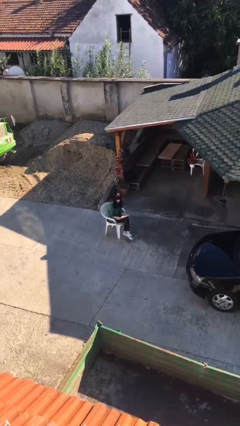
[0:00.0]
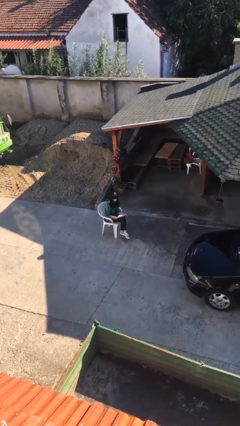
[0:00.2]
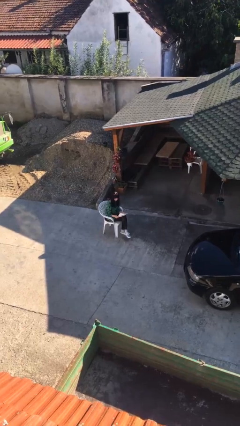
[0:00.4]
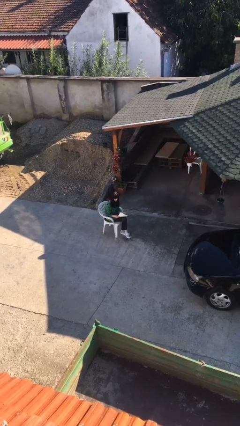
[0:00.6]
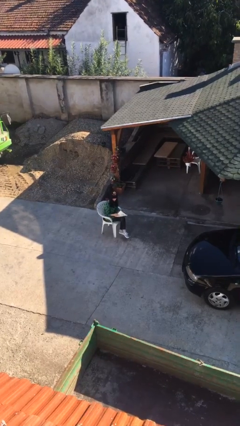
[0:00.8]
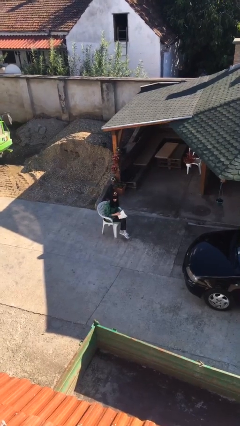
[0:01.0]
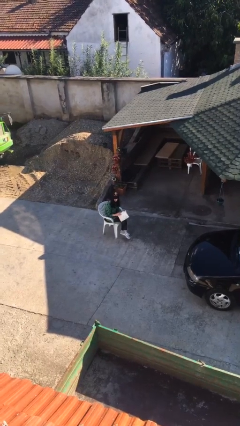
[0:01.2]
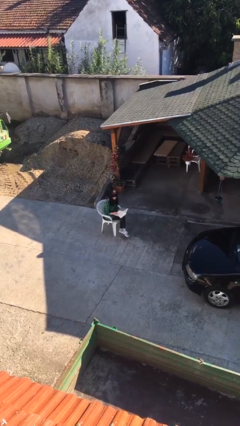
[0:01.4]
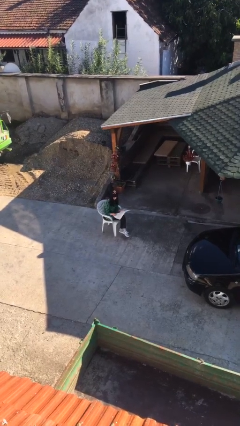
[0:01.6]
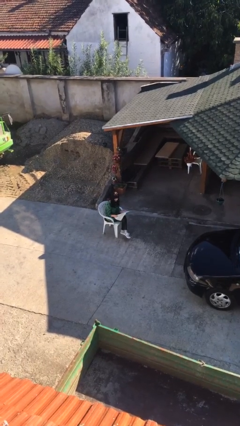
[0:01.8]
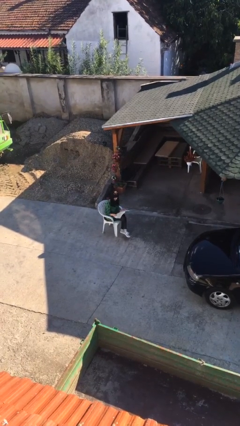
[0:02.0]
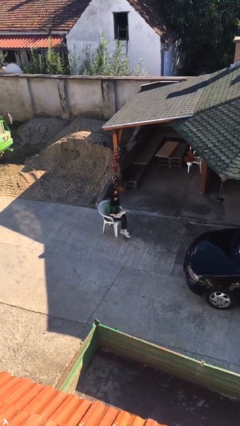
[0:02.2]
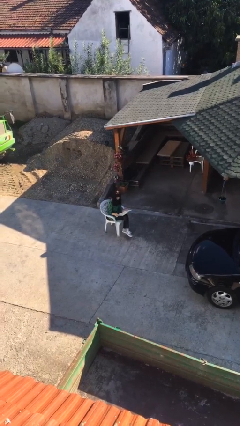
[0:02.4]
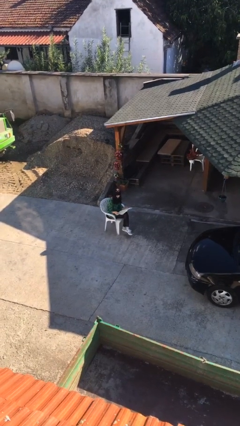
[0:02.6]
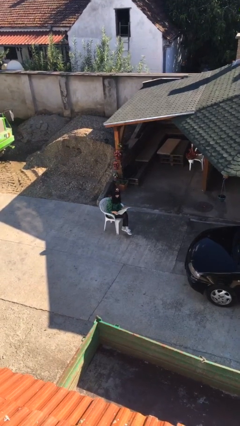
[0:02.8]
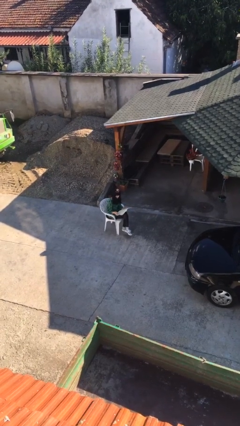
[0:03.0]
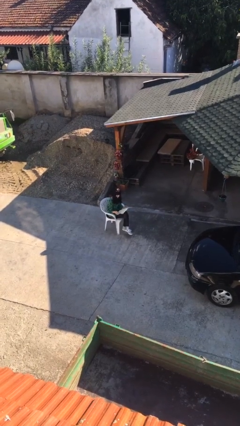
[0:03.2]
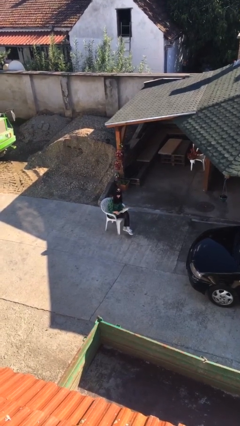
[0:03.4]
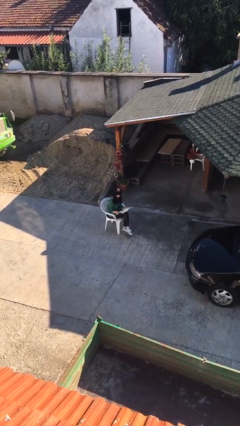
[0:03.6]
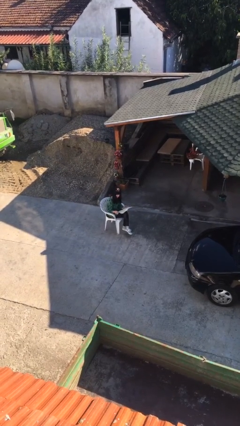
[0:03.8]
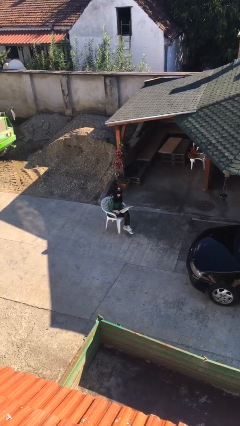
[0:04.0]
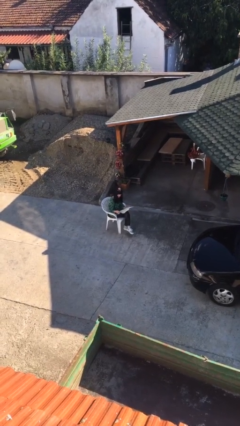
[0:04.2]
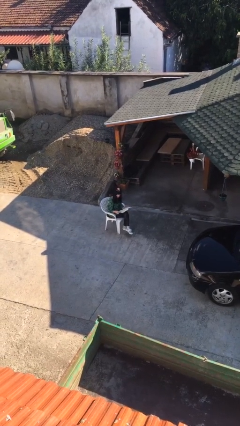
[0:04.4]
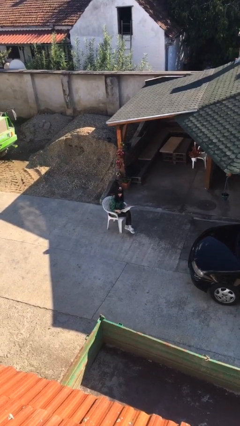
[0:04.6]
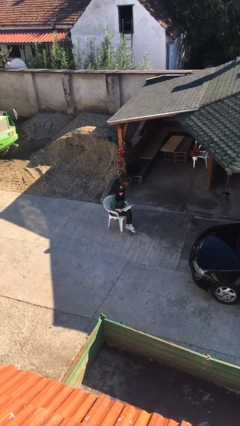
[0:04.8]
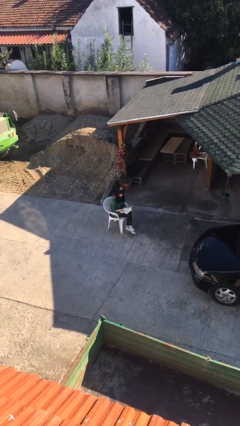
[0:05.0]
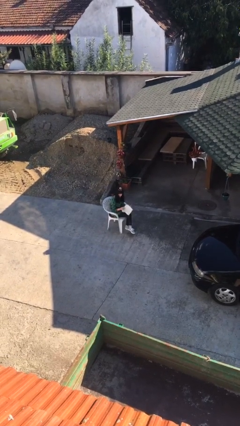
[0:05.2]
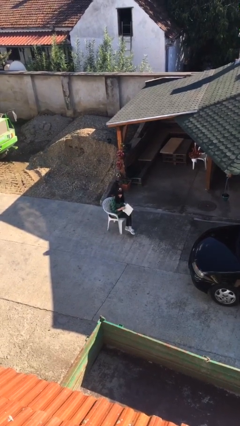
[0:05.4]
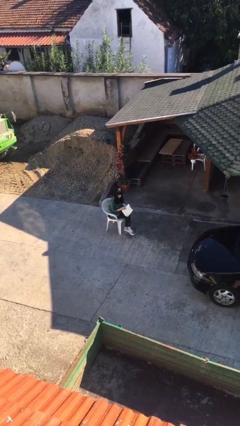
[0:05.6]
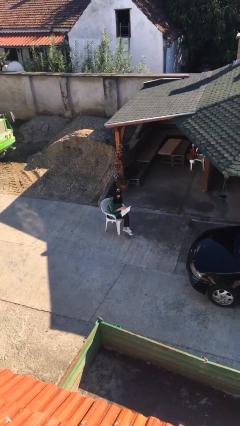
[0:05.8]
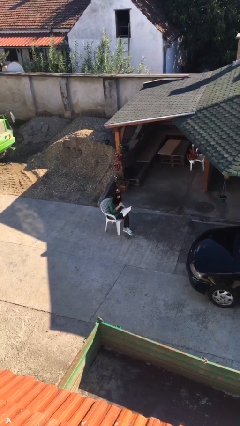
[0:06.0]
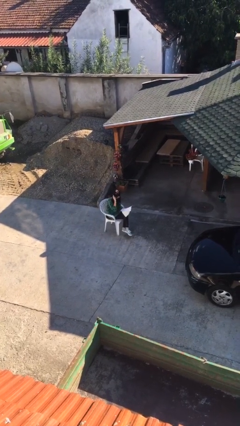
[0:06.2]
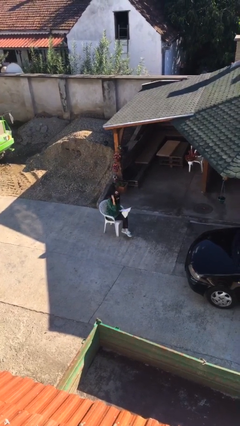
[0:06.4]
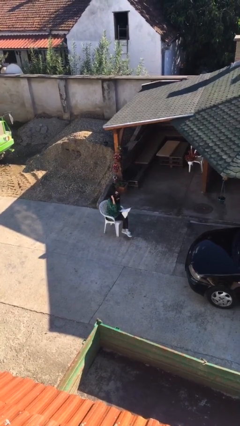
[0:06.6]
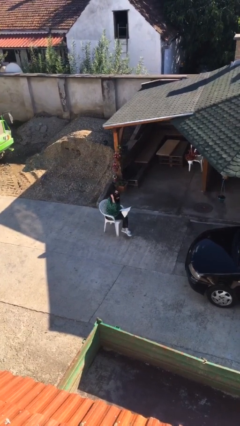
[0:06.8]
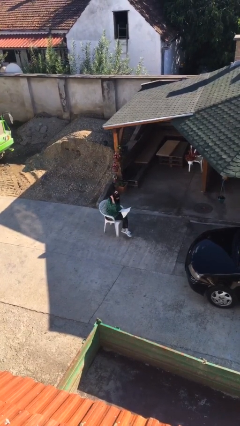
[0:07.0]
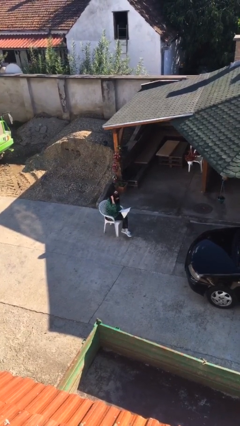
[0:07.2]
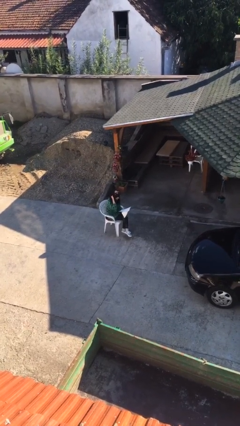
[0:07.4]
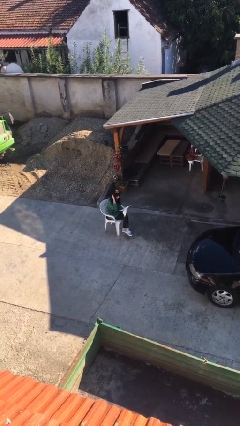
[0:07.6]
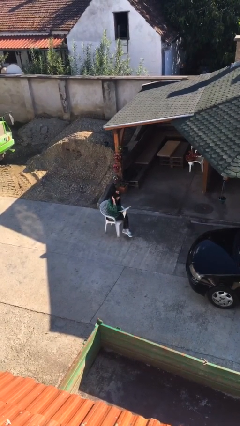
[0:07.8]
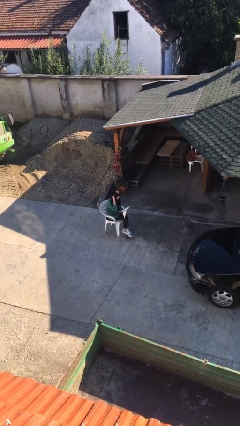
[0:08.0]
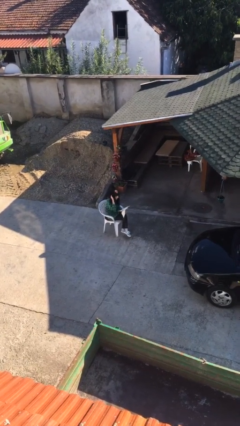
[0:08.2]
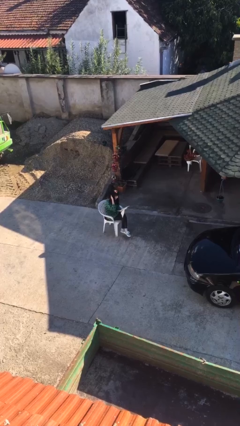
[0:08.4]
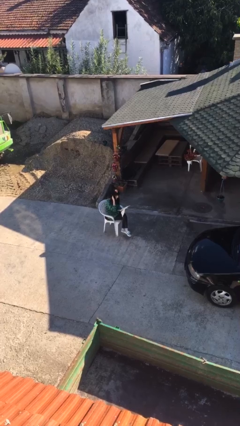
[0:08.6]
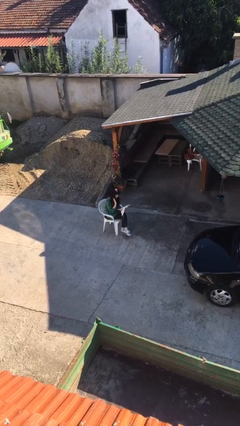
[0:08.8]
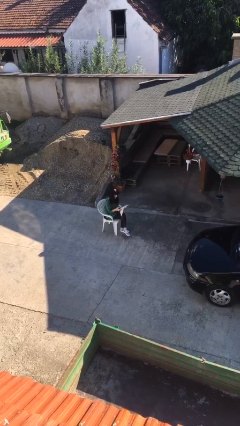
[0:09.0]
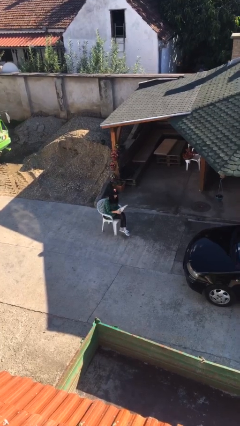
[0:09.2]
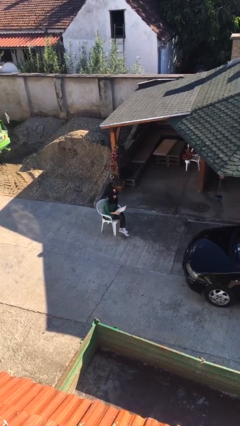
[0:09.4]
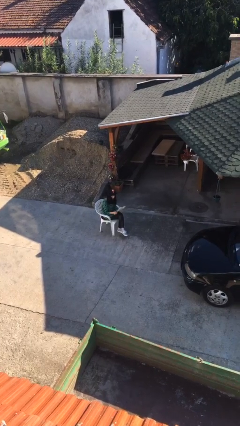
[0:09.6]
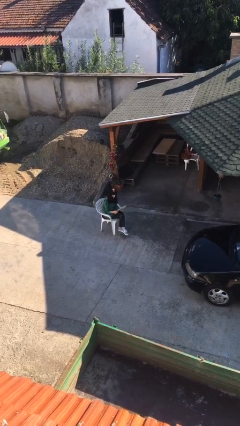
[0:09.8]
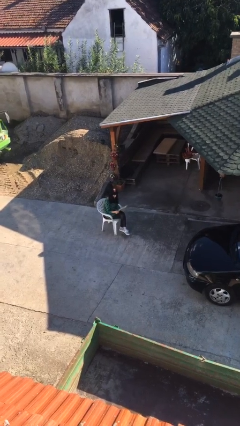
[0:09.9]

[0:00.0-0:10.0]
person reads document

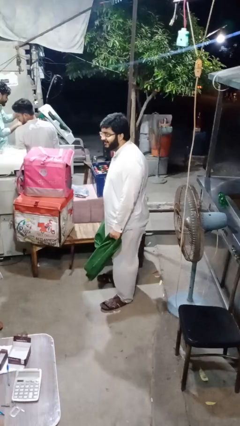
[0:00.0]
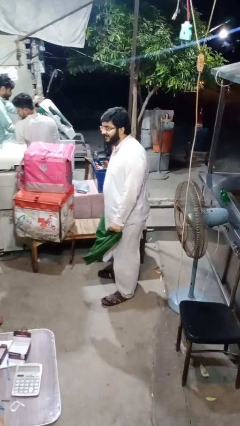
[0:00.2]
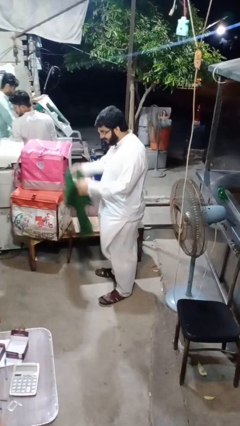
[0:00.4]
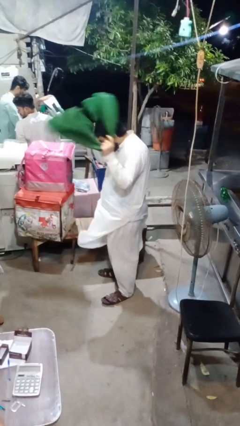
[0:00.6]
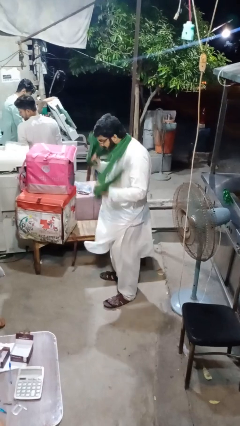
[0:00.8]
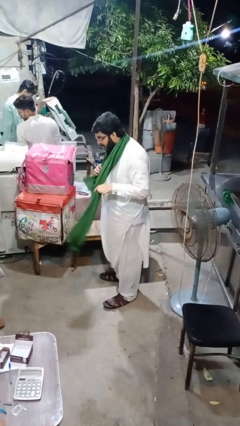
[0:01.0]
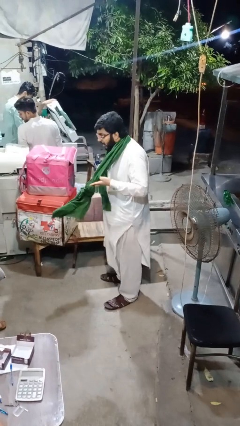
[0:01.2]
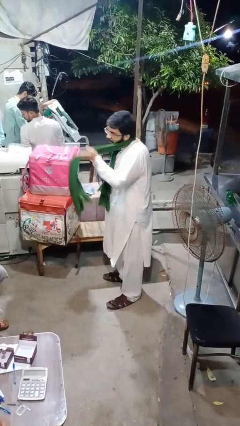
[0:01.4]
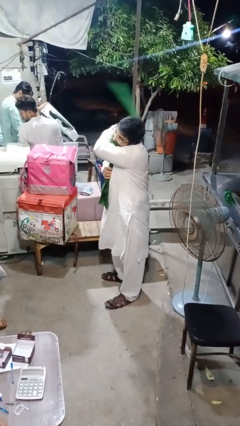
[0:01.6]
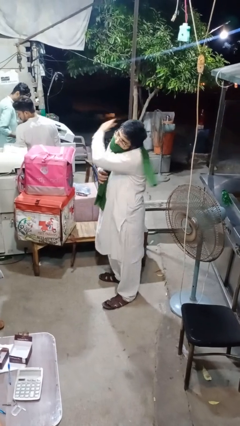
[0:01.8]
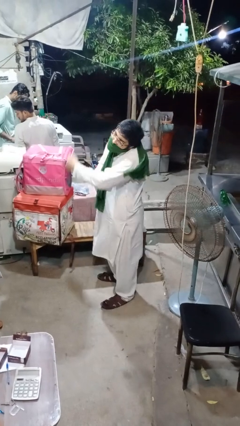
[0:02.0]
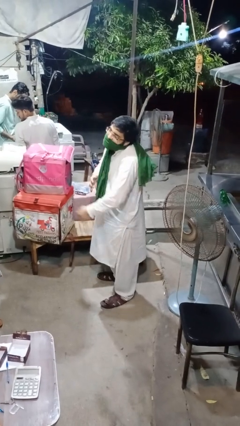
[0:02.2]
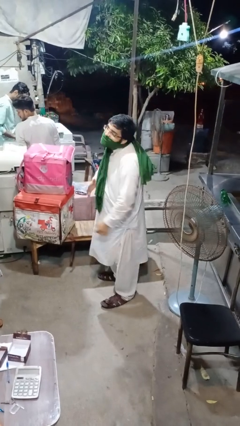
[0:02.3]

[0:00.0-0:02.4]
person puts on scarf

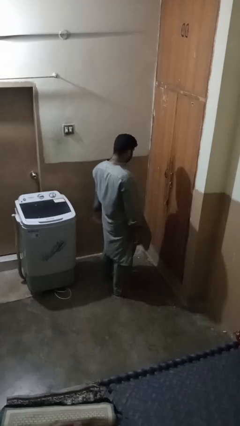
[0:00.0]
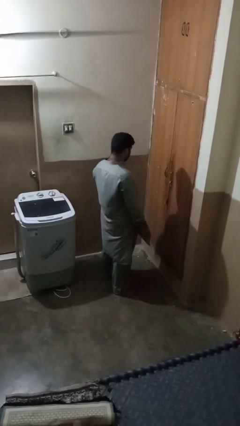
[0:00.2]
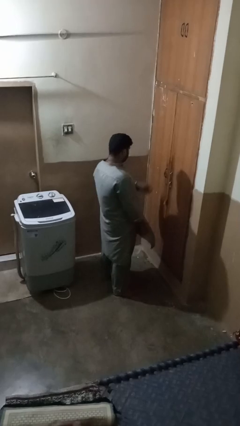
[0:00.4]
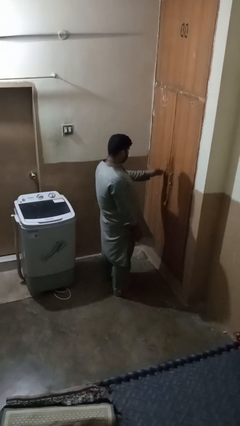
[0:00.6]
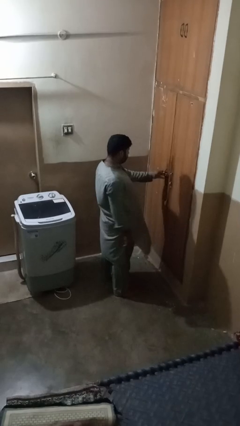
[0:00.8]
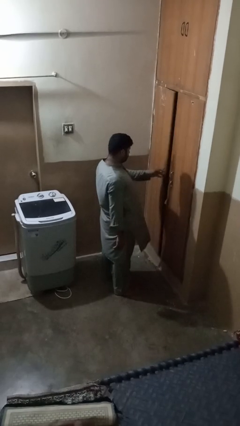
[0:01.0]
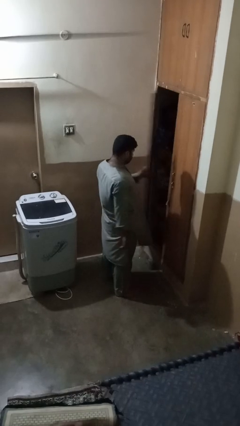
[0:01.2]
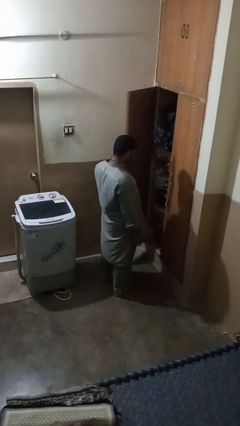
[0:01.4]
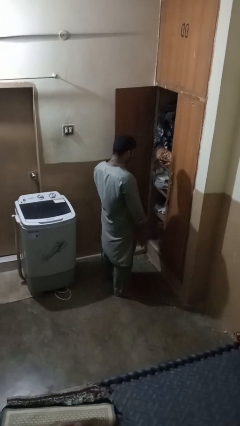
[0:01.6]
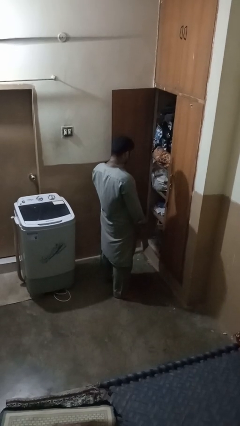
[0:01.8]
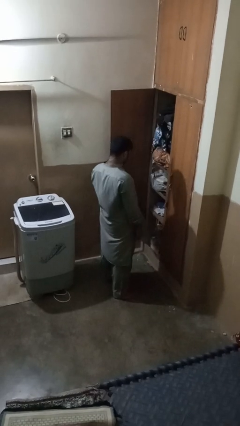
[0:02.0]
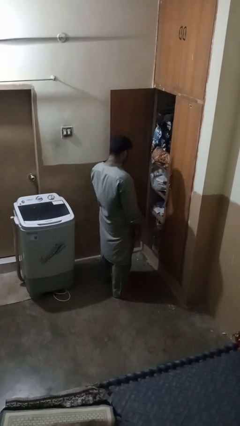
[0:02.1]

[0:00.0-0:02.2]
person opens closet door

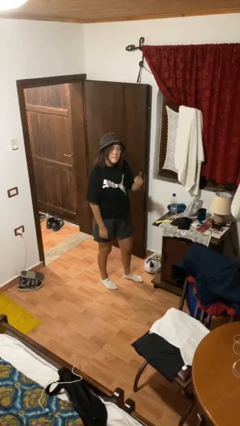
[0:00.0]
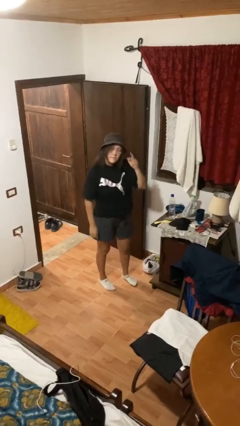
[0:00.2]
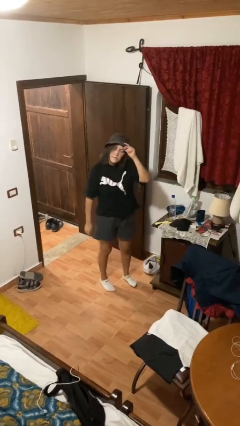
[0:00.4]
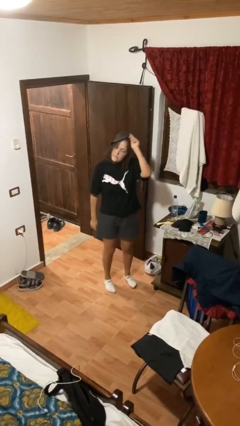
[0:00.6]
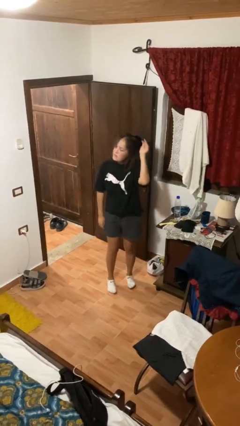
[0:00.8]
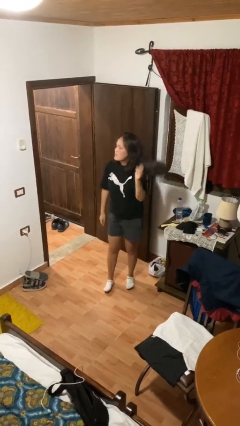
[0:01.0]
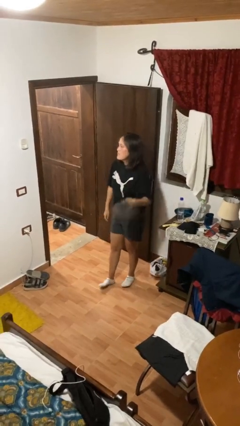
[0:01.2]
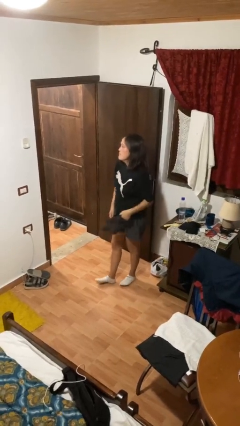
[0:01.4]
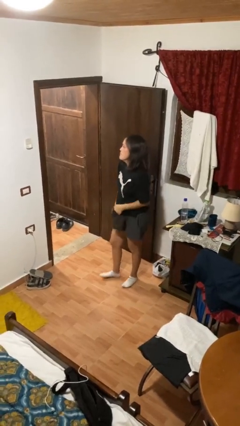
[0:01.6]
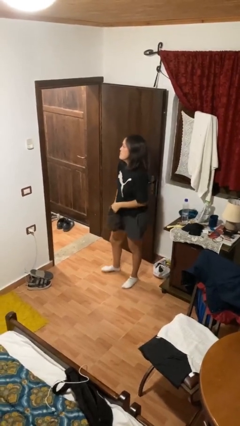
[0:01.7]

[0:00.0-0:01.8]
person takes off hat

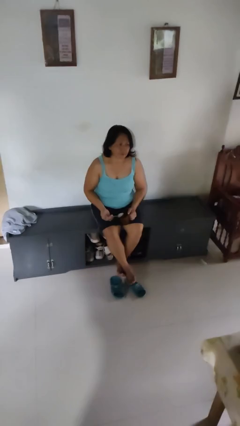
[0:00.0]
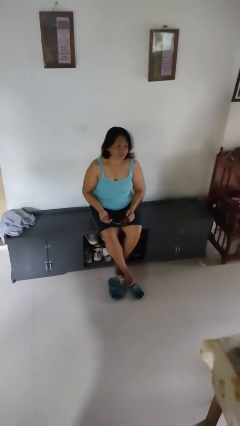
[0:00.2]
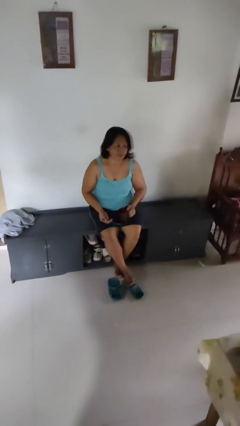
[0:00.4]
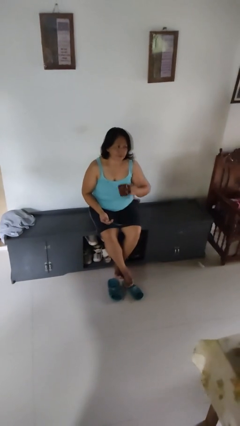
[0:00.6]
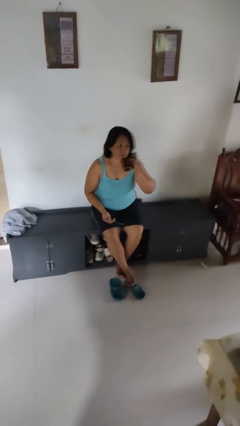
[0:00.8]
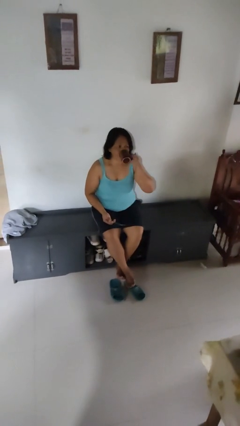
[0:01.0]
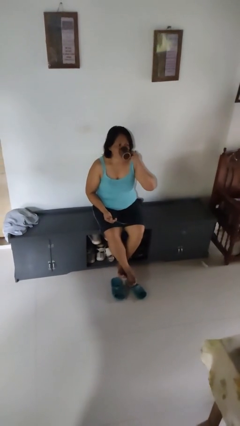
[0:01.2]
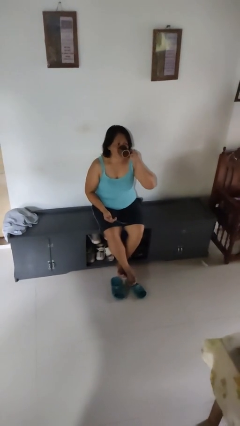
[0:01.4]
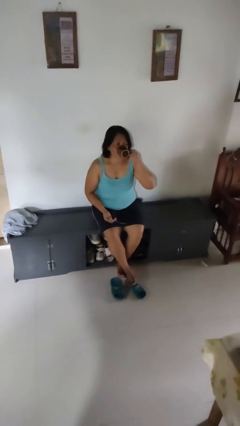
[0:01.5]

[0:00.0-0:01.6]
person drinks from mug
